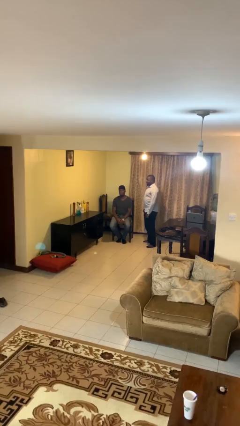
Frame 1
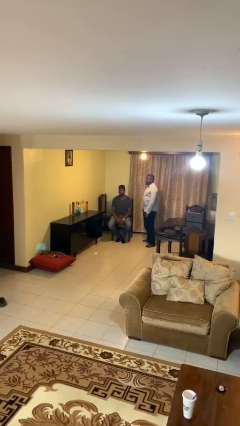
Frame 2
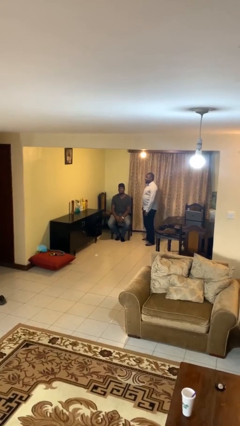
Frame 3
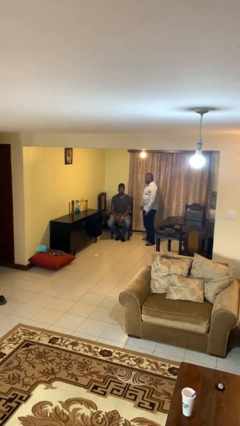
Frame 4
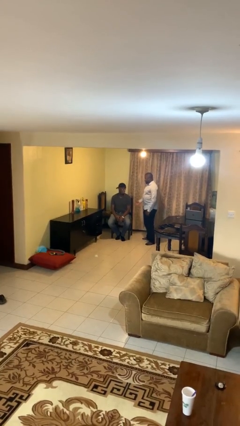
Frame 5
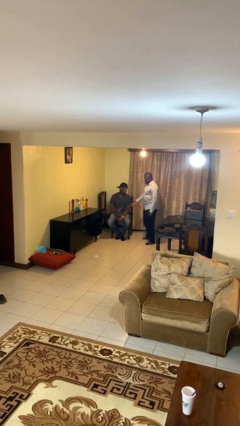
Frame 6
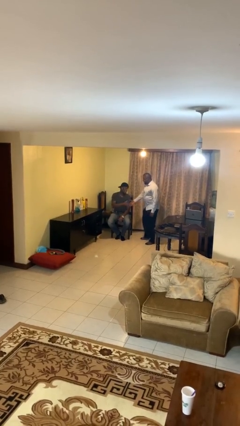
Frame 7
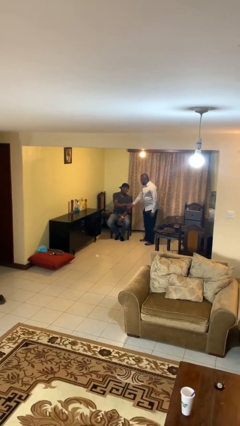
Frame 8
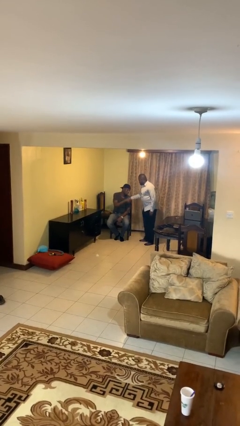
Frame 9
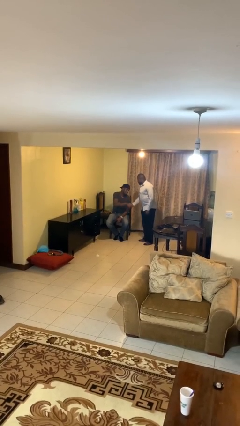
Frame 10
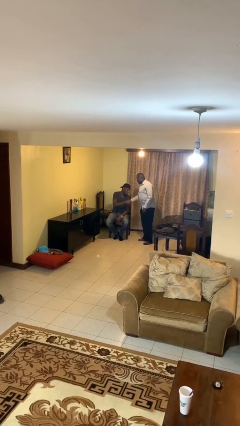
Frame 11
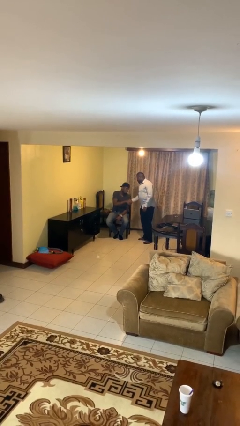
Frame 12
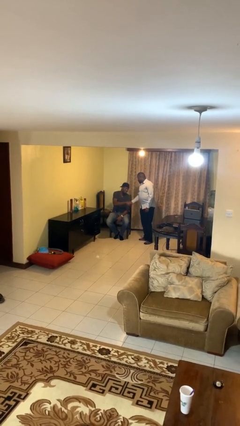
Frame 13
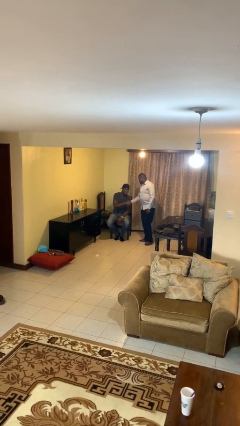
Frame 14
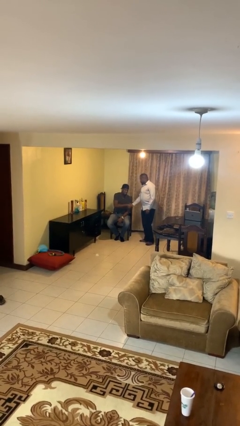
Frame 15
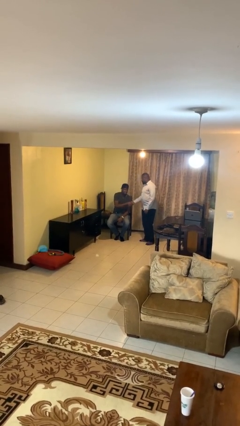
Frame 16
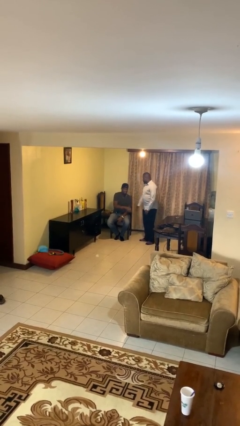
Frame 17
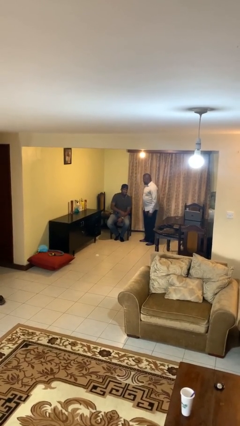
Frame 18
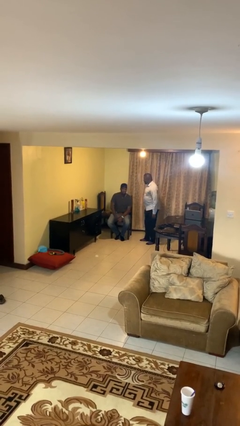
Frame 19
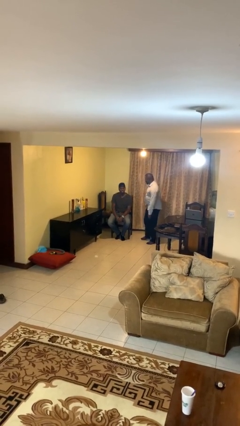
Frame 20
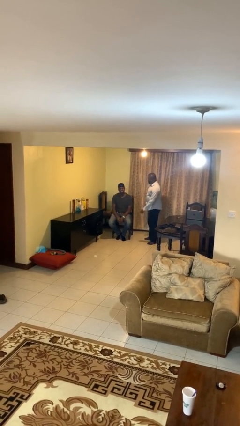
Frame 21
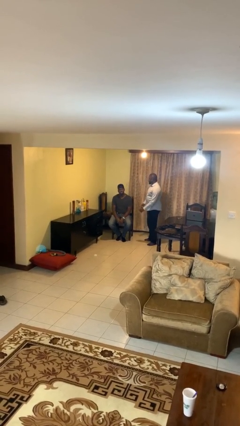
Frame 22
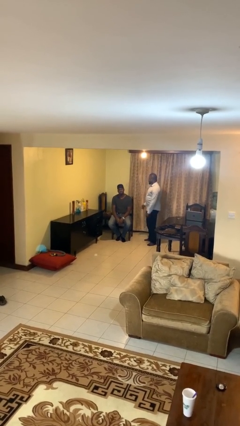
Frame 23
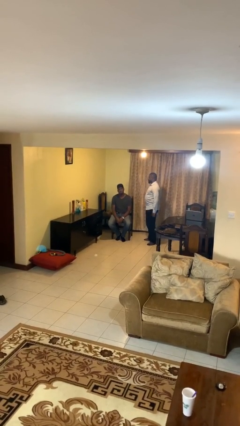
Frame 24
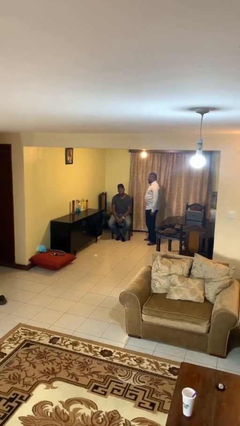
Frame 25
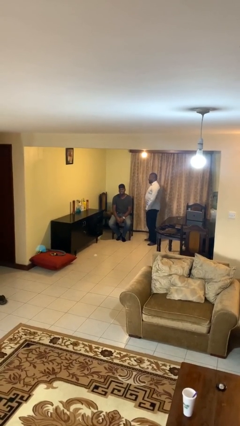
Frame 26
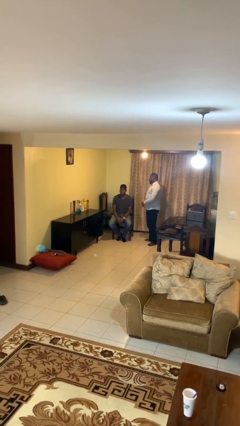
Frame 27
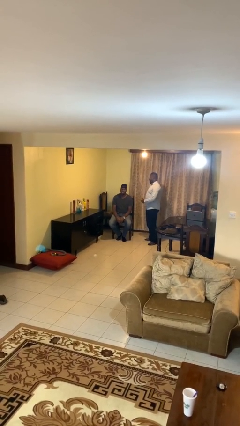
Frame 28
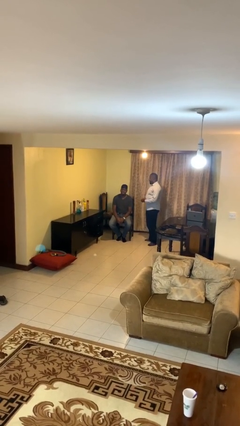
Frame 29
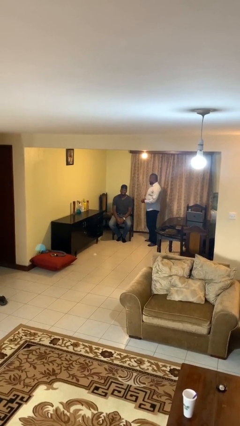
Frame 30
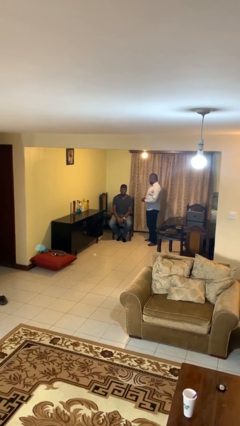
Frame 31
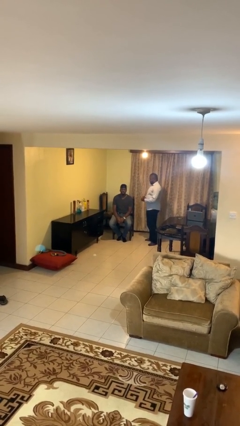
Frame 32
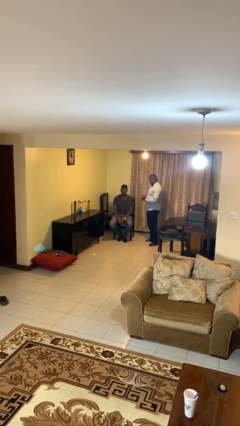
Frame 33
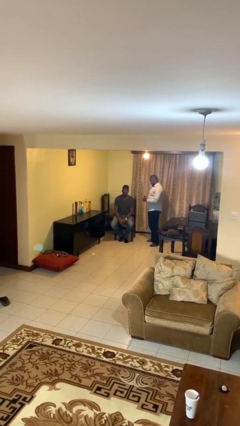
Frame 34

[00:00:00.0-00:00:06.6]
person shakes hand

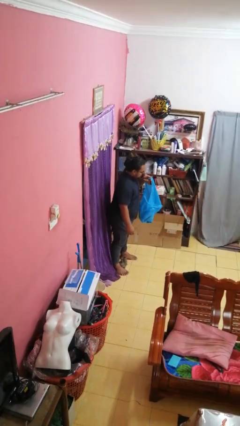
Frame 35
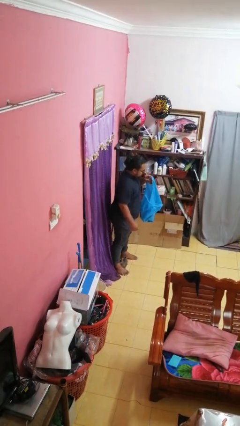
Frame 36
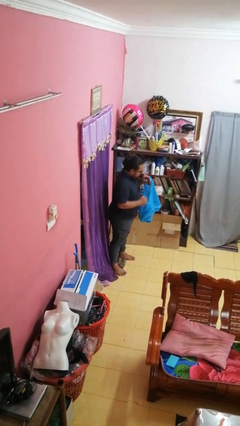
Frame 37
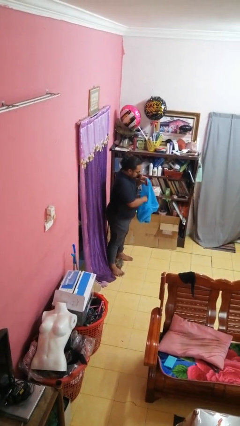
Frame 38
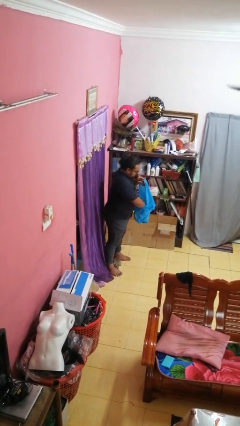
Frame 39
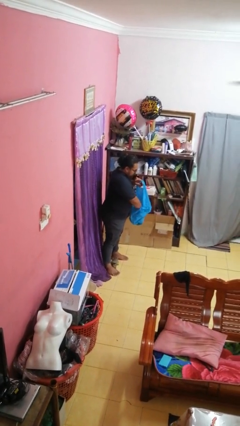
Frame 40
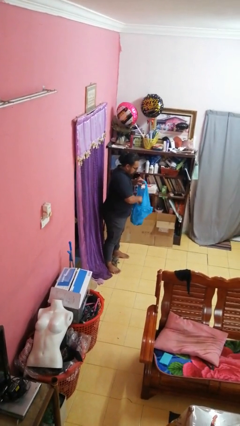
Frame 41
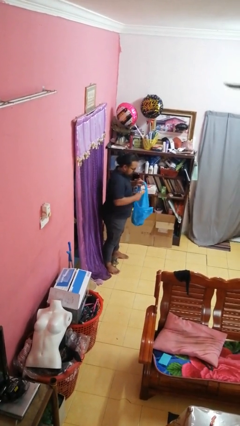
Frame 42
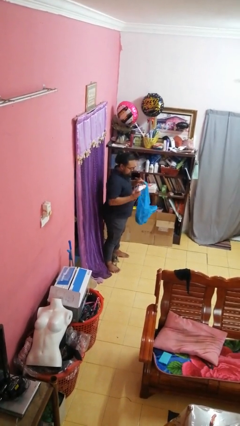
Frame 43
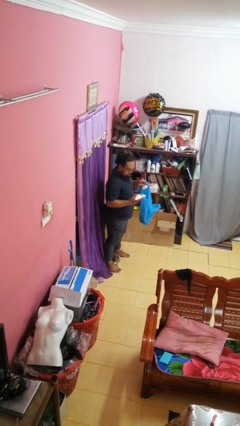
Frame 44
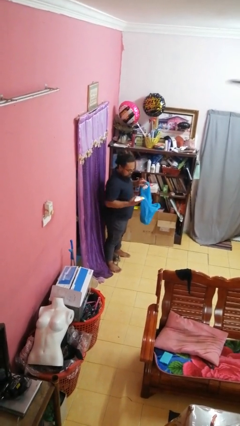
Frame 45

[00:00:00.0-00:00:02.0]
person takes object from bag

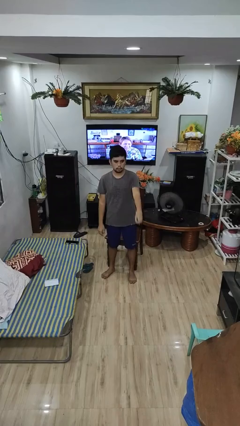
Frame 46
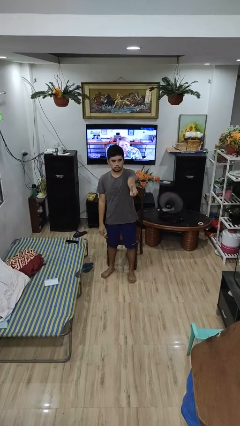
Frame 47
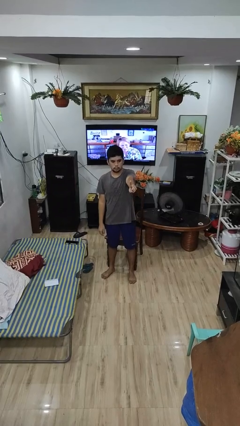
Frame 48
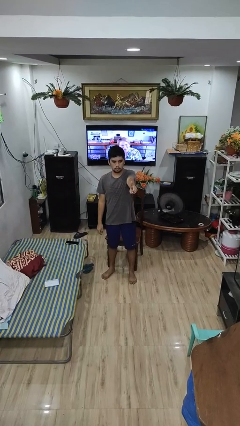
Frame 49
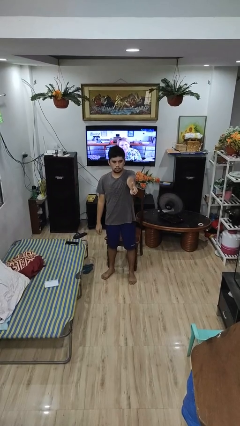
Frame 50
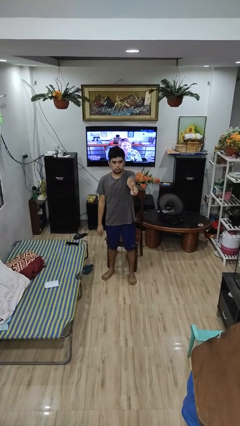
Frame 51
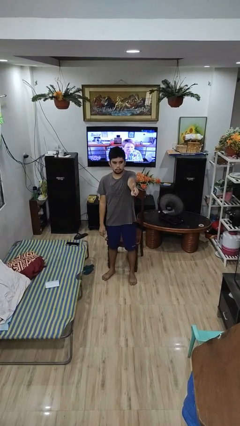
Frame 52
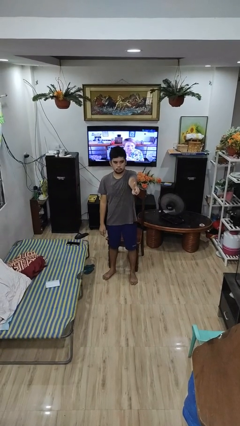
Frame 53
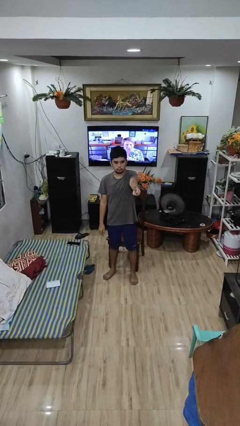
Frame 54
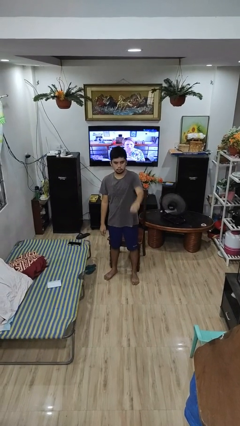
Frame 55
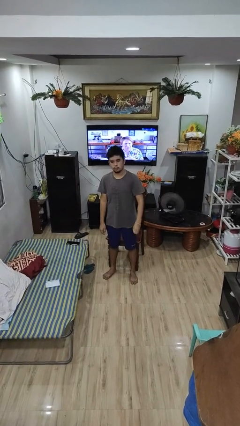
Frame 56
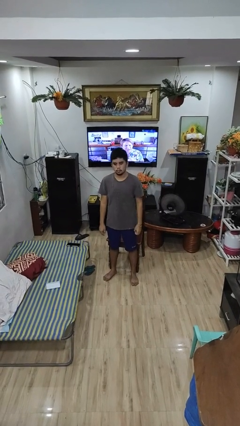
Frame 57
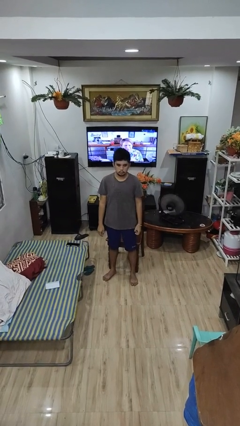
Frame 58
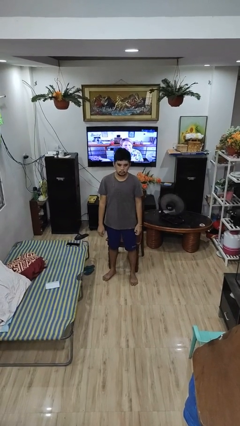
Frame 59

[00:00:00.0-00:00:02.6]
person gestures number one

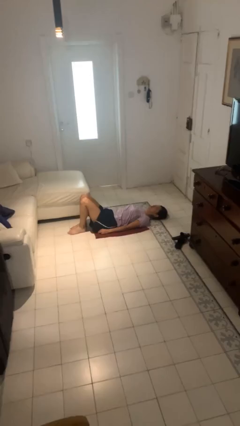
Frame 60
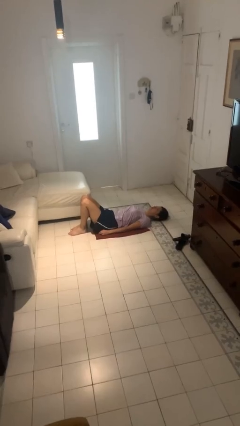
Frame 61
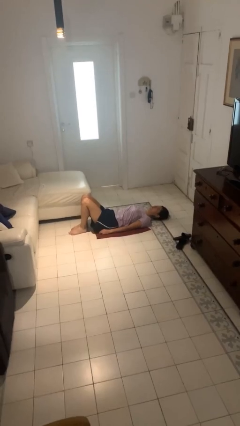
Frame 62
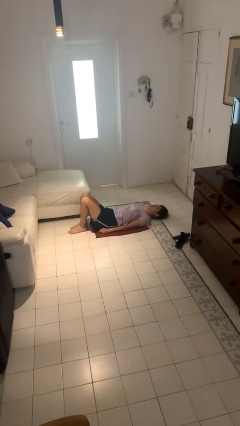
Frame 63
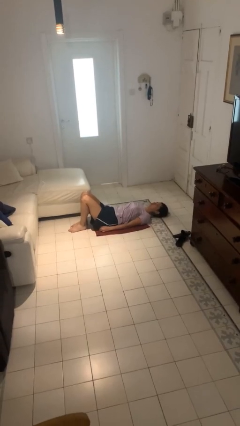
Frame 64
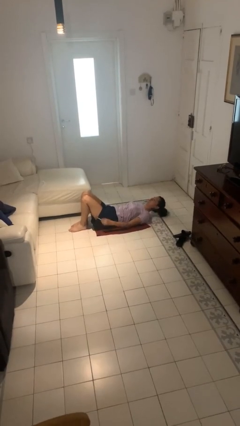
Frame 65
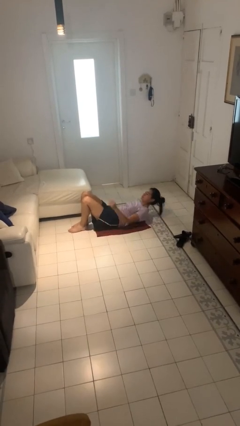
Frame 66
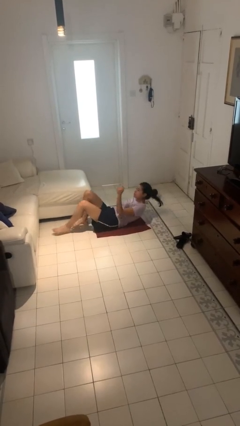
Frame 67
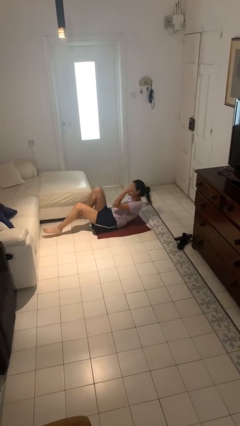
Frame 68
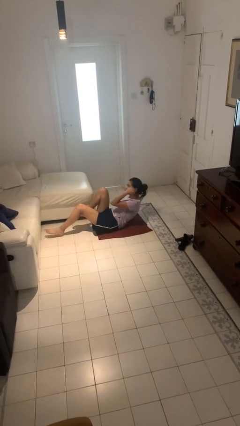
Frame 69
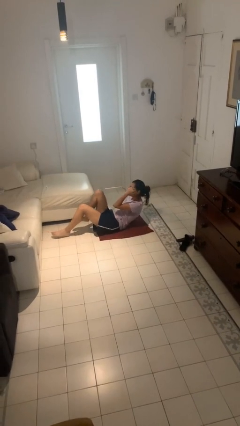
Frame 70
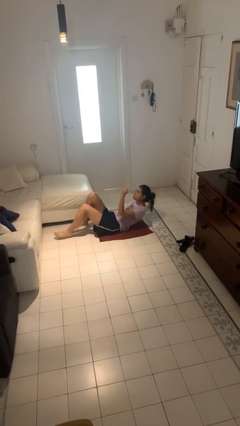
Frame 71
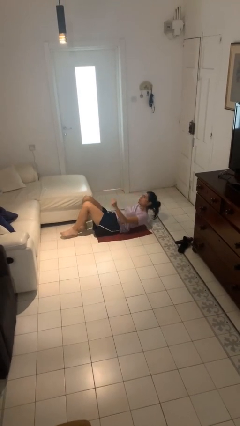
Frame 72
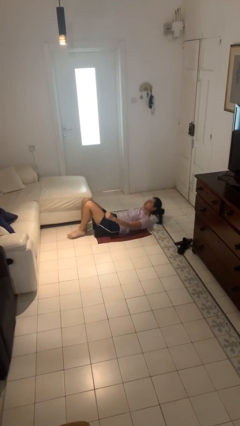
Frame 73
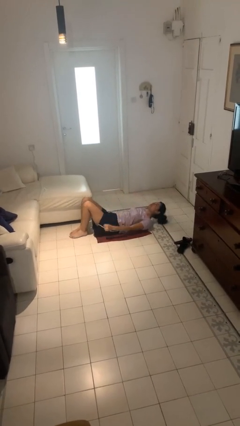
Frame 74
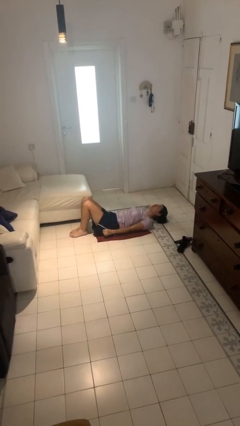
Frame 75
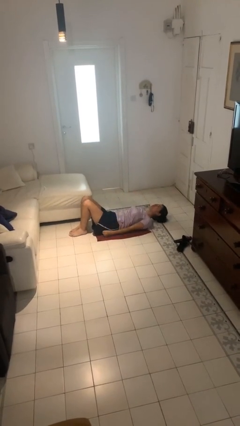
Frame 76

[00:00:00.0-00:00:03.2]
person exercises with situp

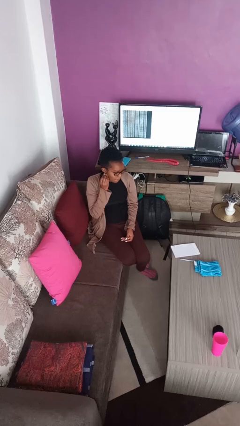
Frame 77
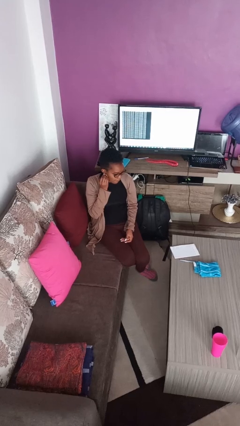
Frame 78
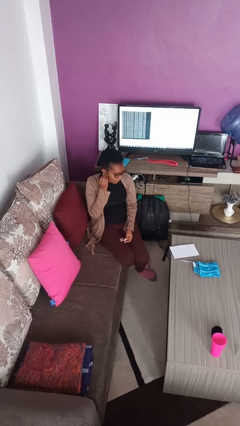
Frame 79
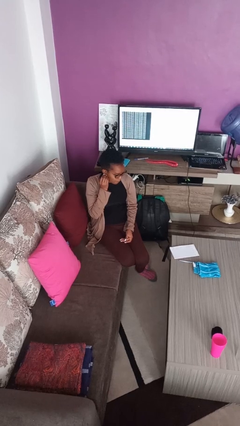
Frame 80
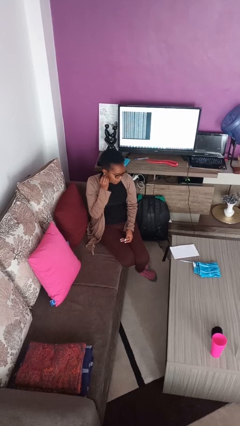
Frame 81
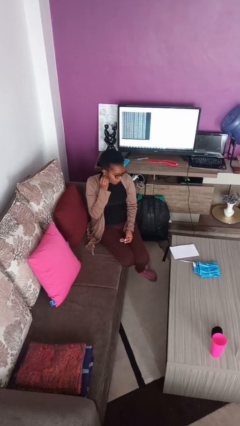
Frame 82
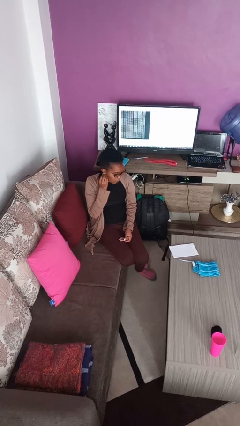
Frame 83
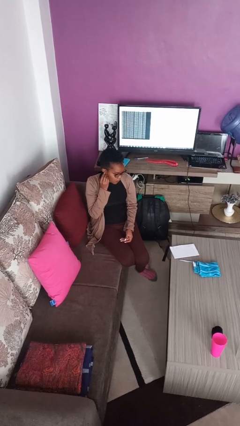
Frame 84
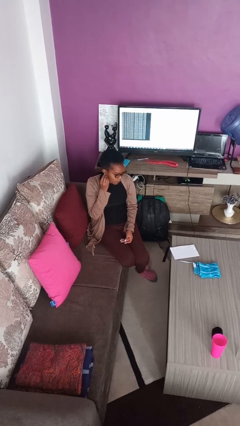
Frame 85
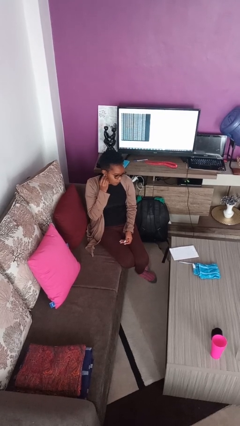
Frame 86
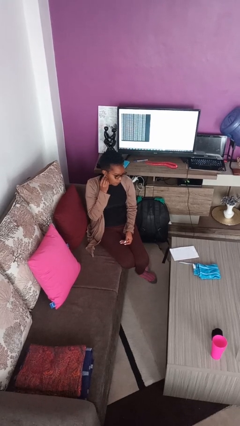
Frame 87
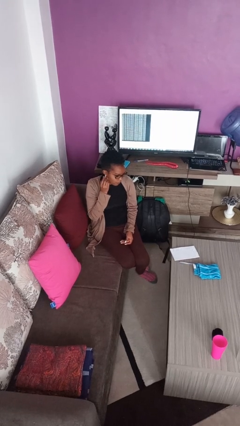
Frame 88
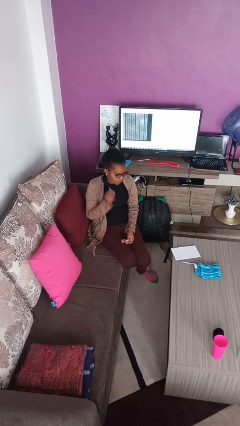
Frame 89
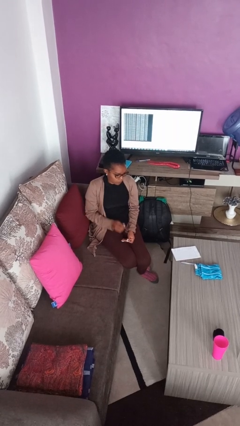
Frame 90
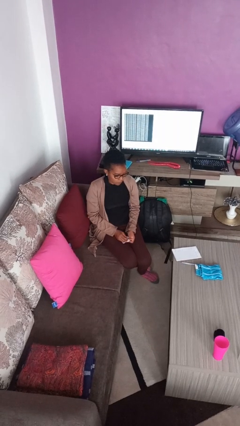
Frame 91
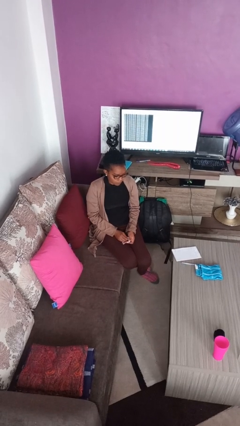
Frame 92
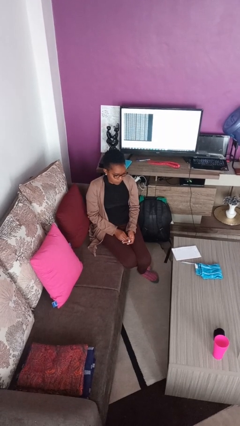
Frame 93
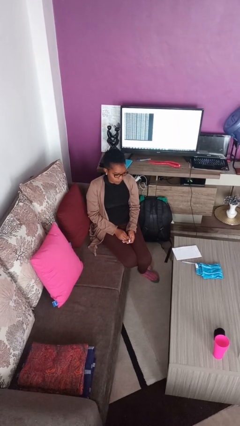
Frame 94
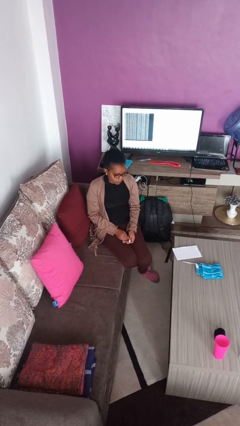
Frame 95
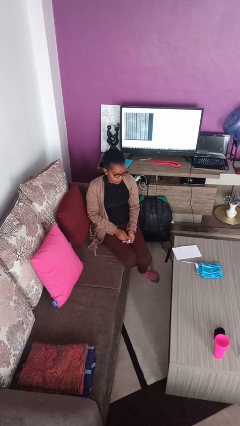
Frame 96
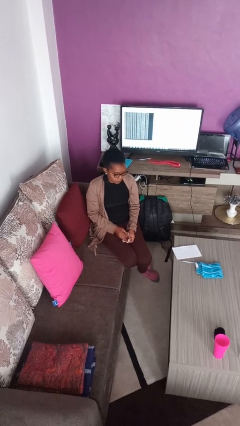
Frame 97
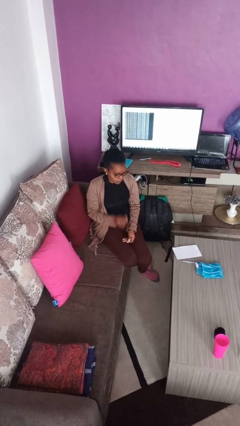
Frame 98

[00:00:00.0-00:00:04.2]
person puts on earrings
